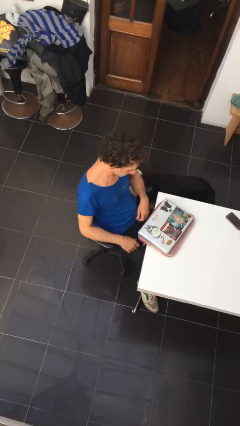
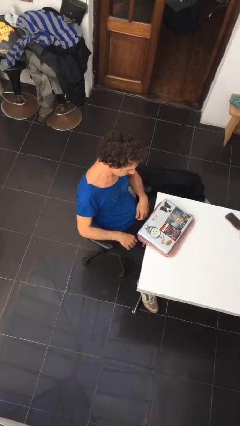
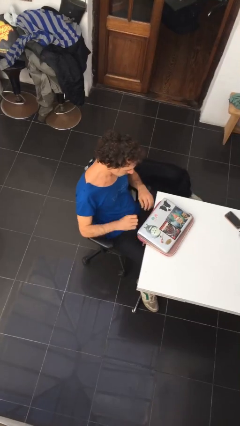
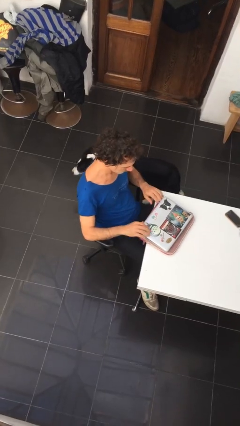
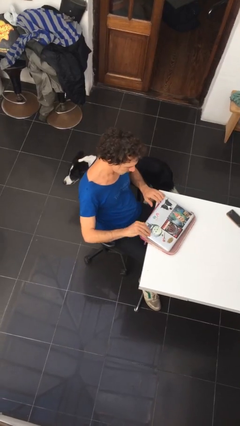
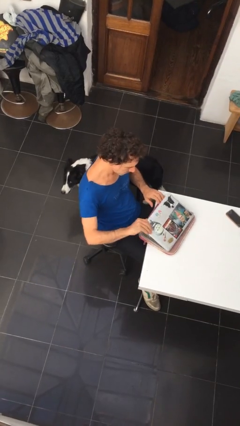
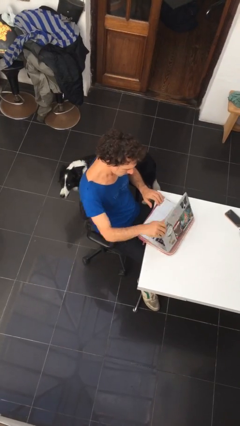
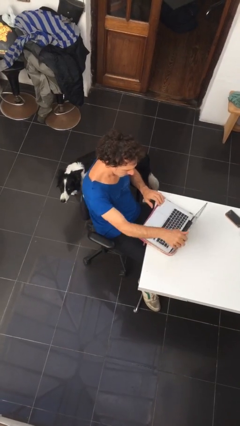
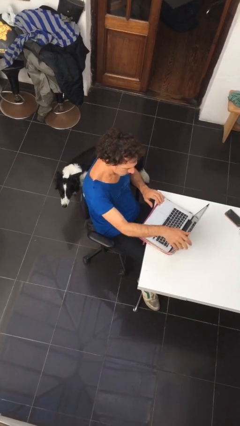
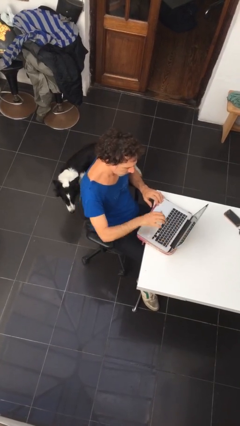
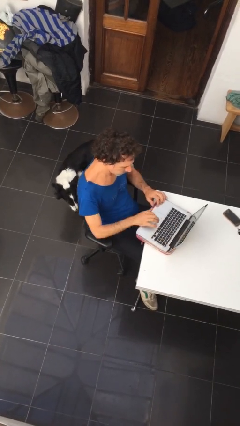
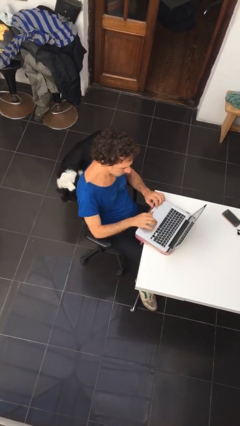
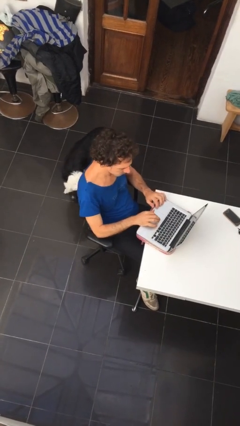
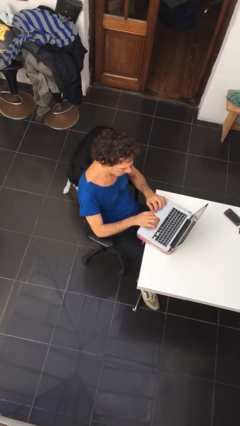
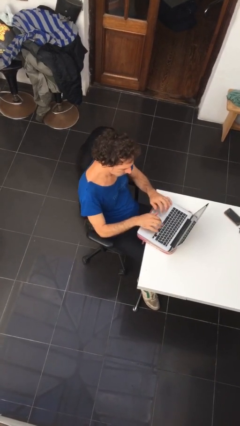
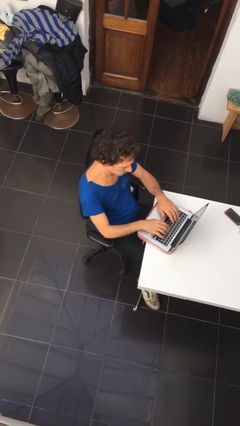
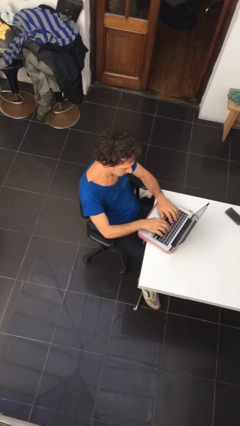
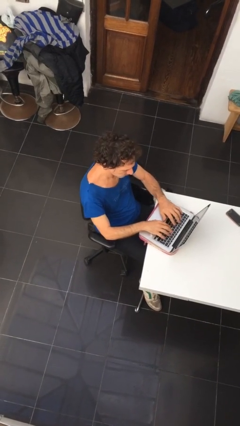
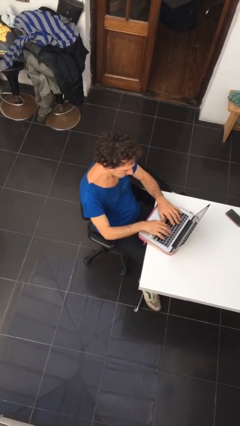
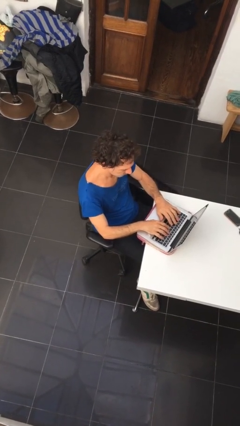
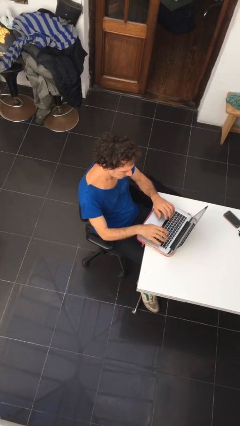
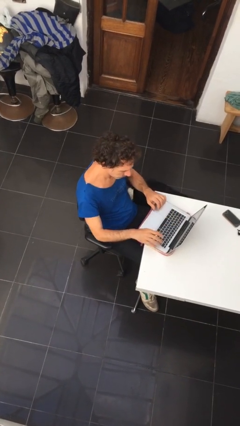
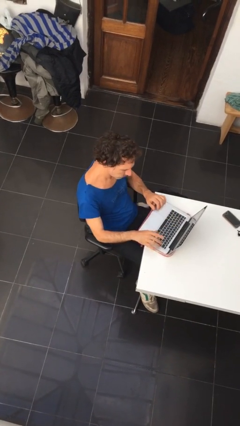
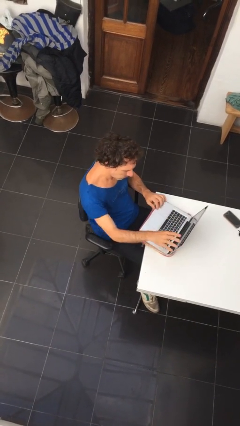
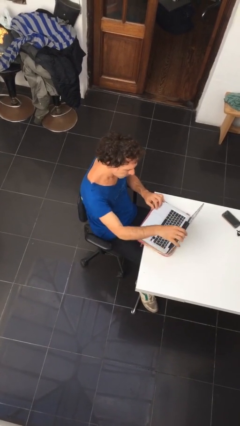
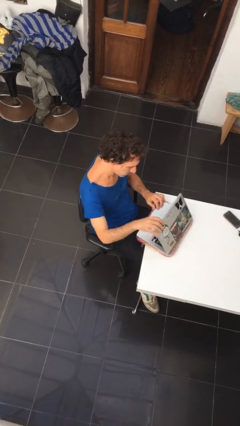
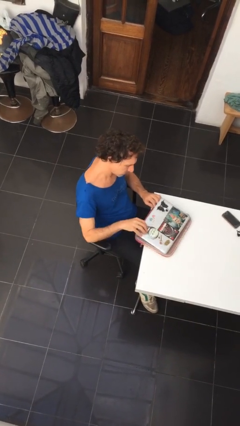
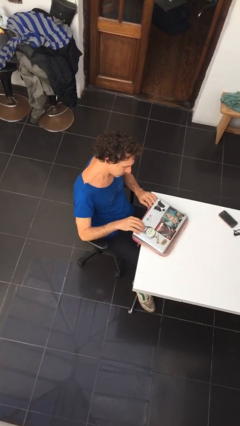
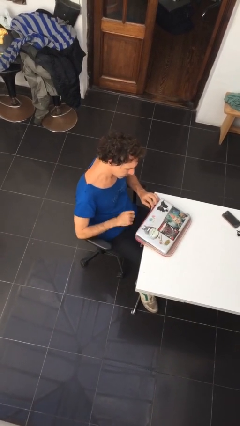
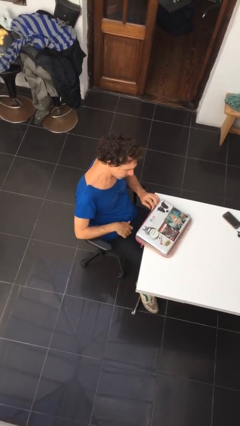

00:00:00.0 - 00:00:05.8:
person interacts with laptop

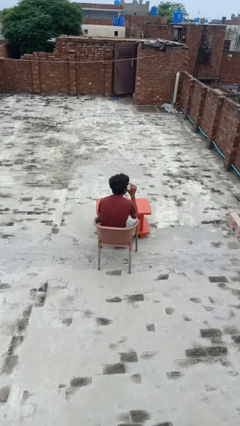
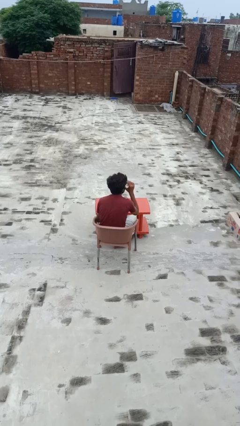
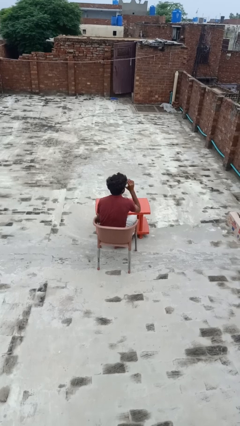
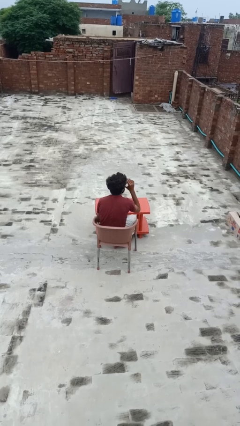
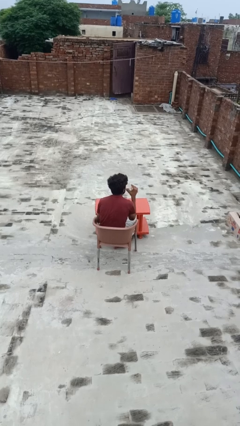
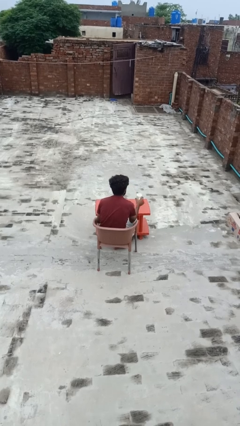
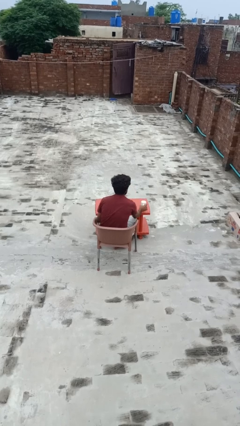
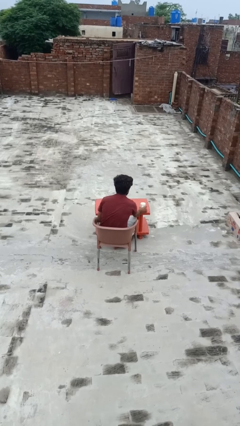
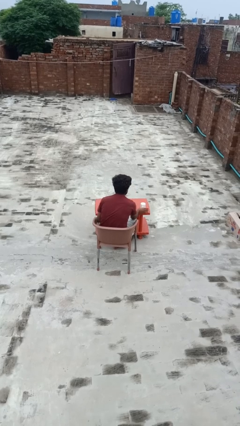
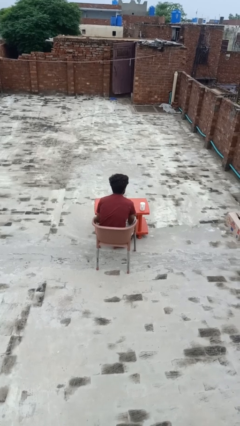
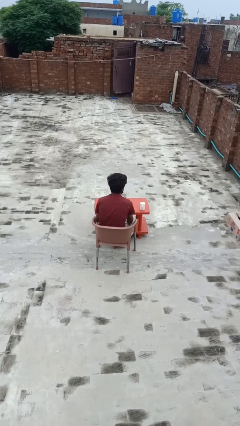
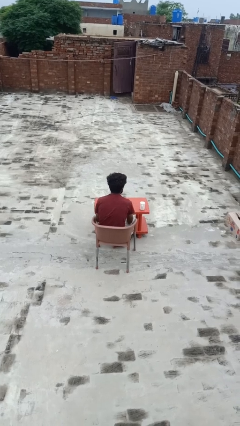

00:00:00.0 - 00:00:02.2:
person drinks from mug

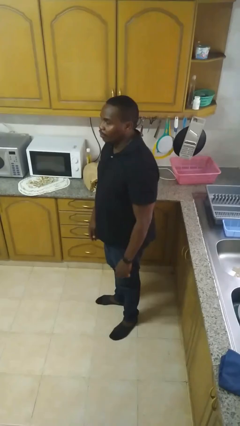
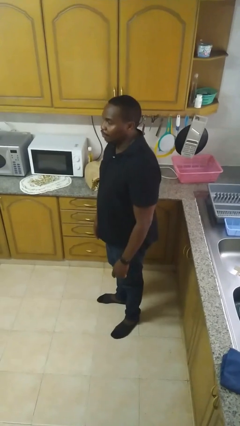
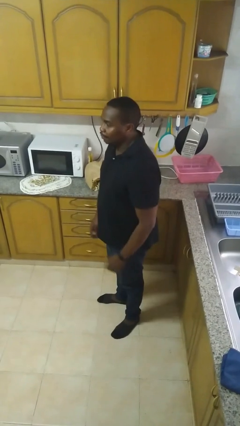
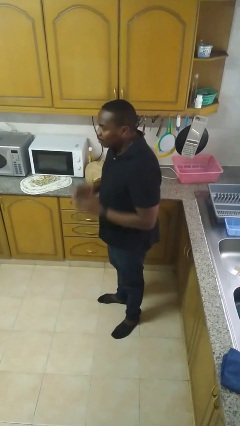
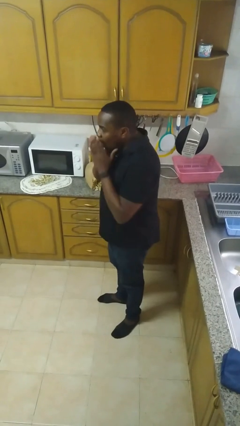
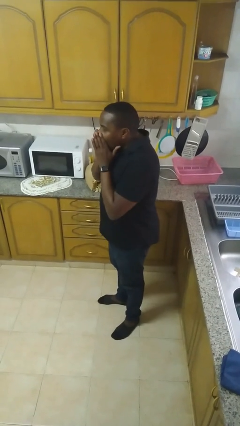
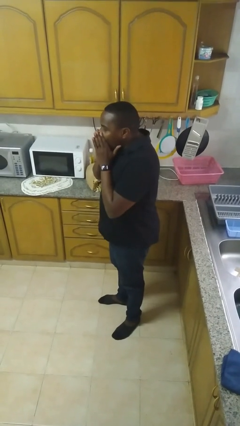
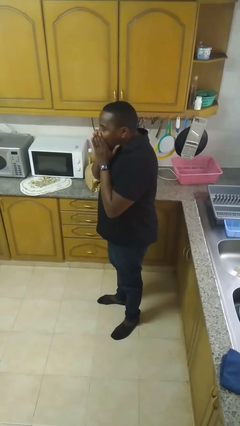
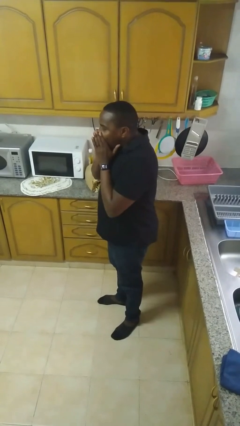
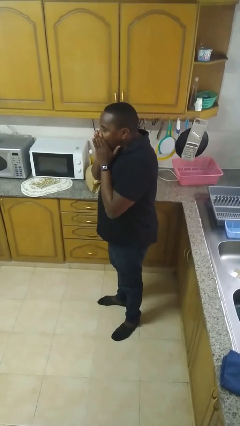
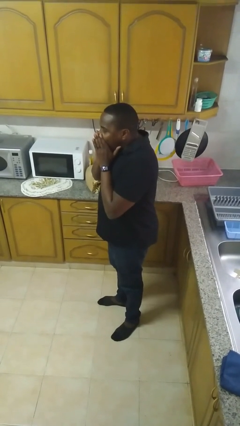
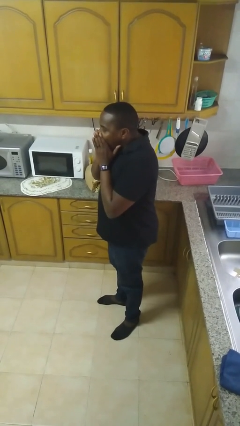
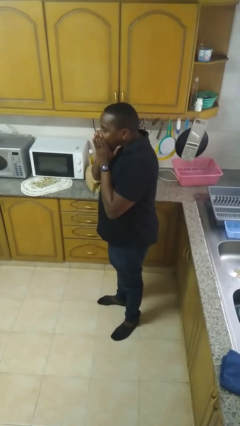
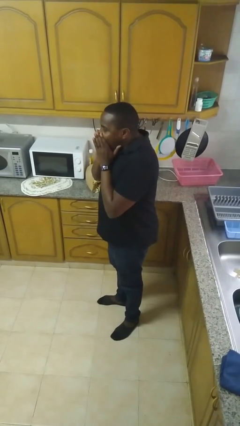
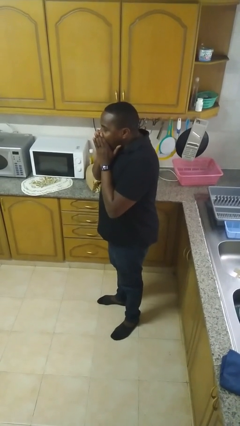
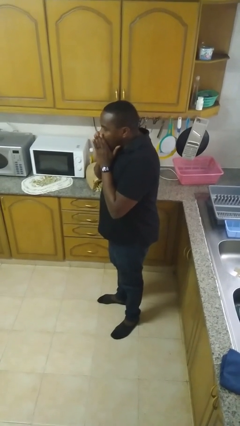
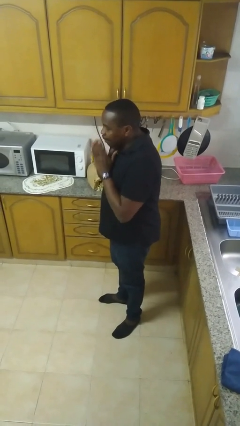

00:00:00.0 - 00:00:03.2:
person yawns

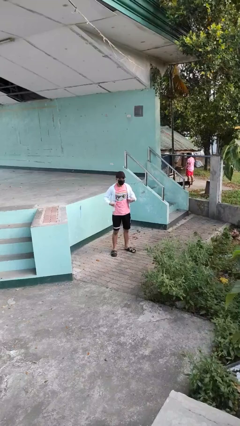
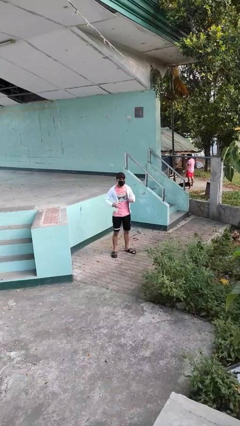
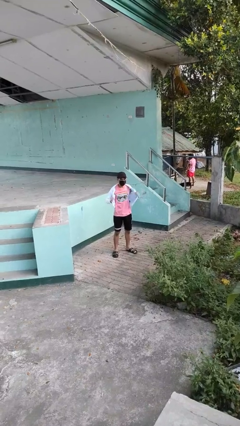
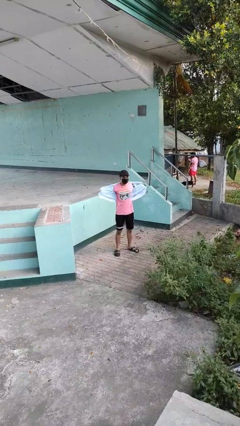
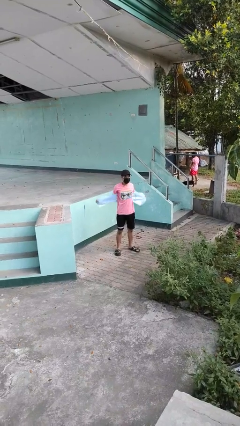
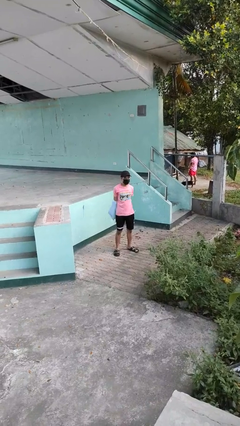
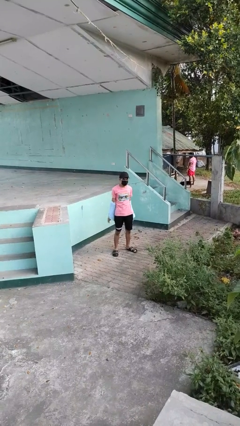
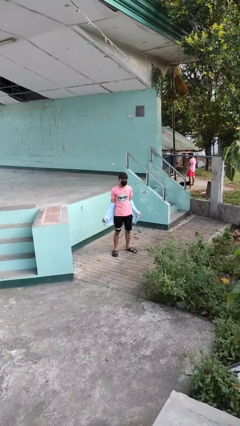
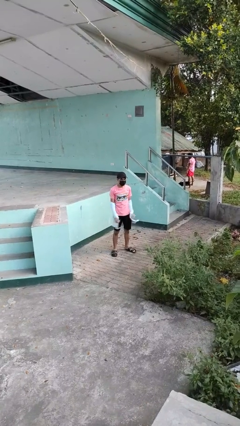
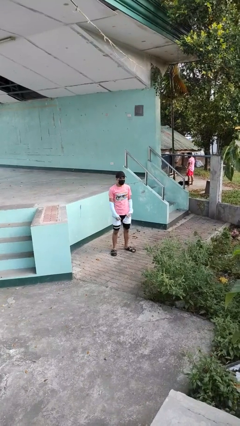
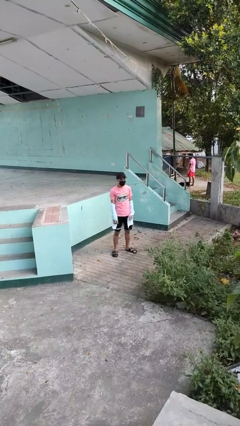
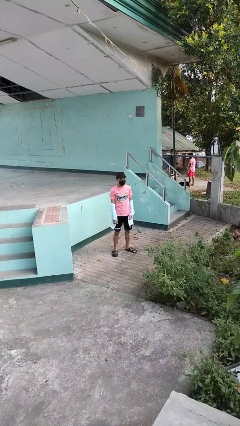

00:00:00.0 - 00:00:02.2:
person takes off jacket

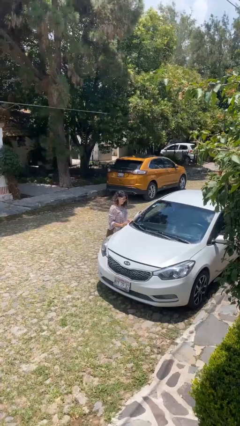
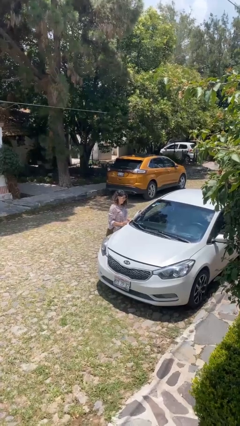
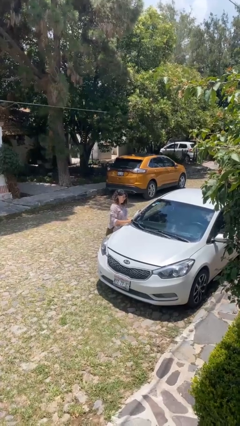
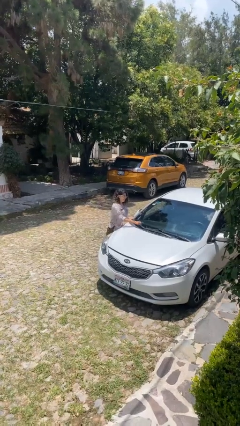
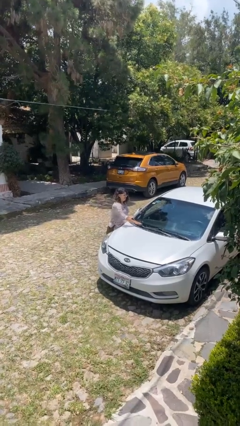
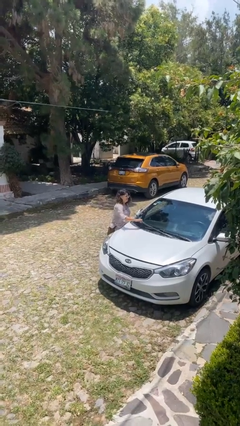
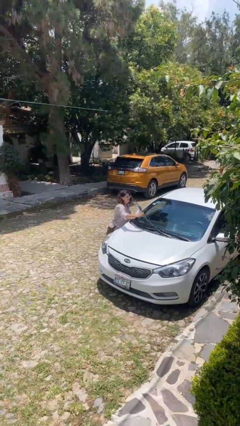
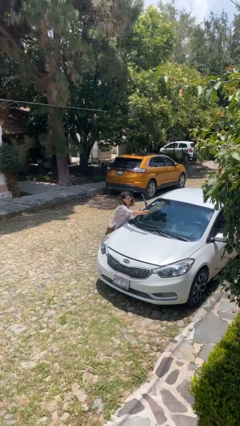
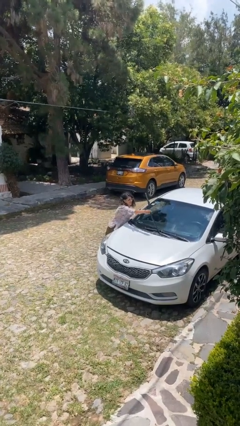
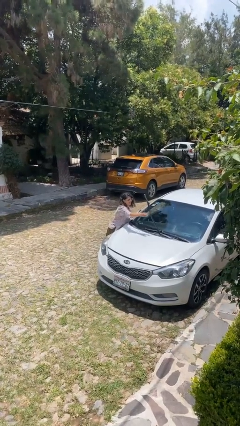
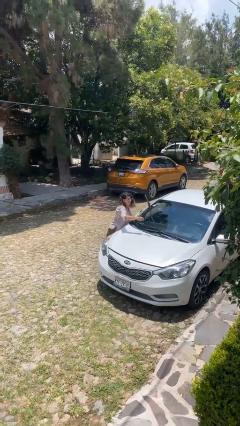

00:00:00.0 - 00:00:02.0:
person flips up car wipers

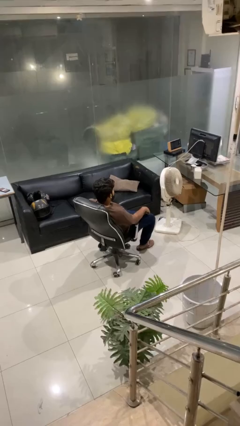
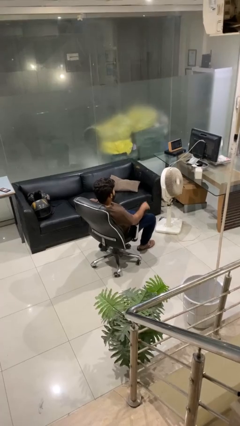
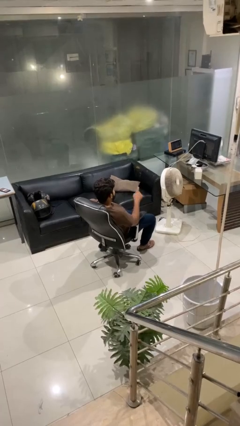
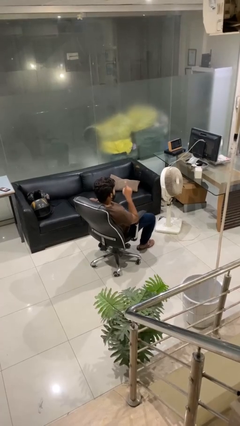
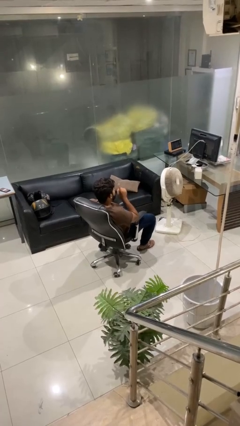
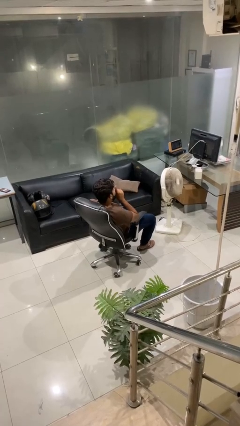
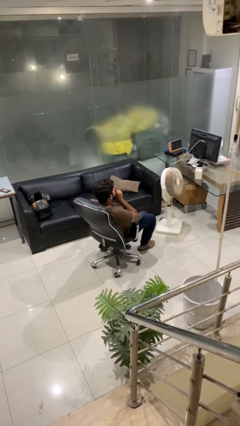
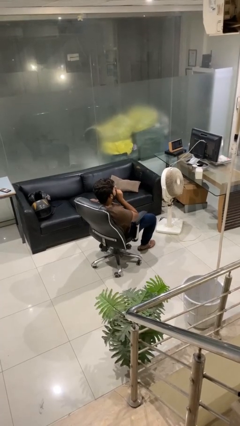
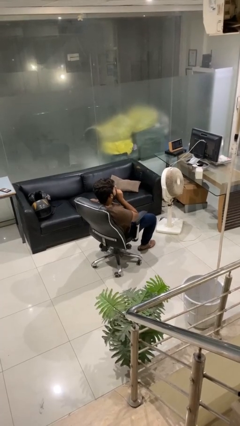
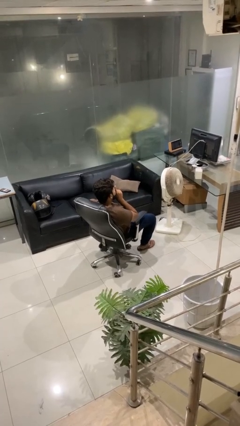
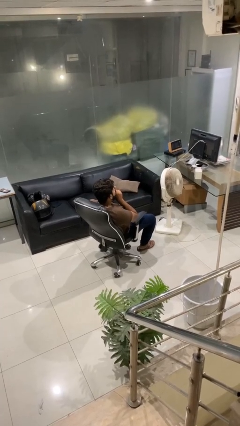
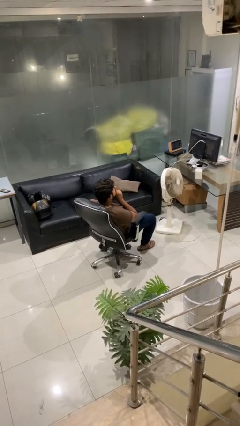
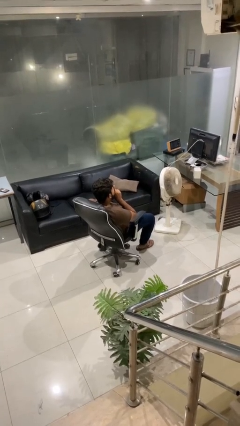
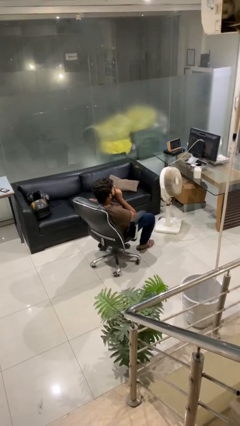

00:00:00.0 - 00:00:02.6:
person gestures be quiet
